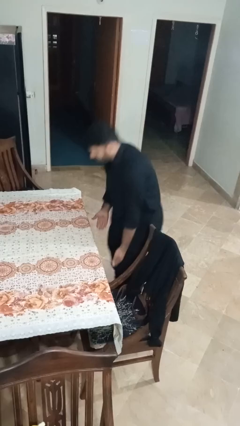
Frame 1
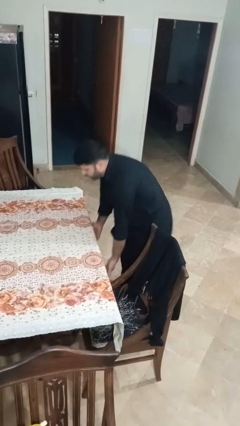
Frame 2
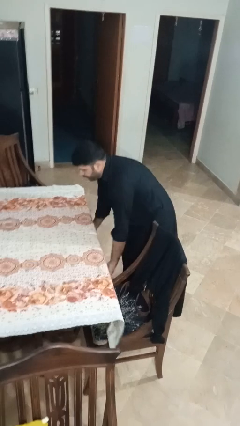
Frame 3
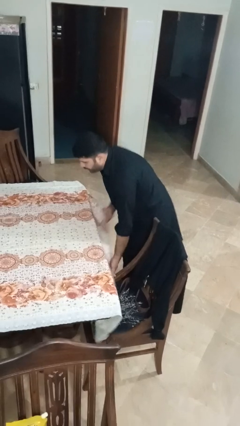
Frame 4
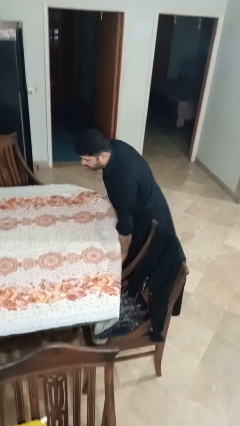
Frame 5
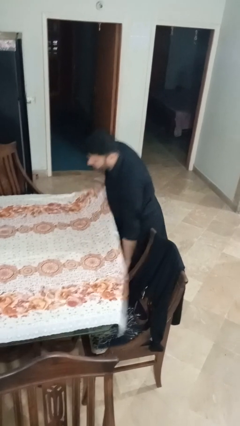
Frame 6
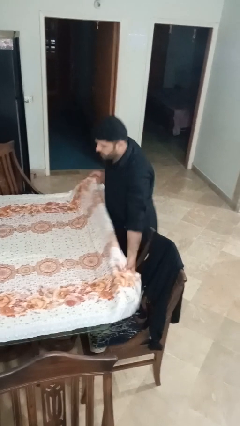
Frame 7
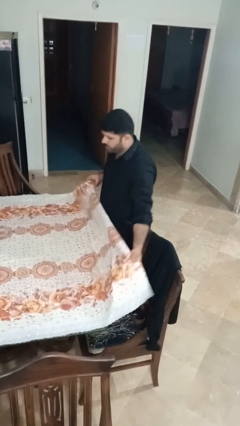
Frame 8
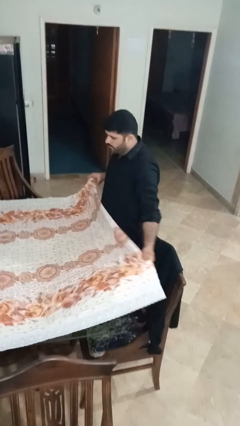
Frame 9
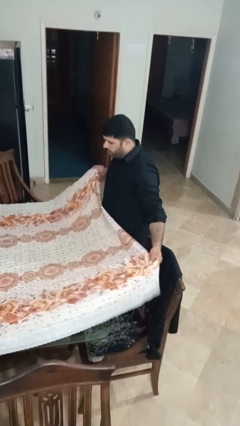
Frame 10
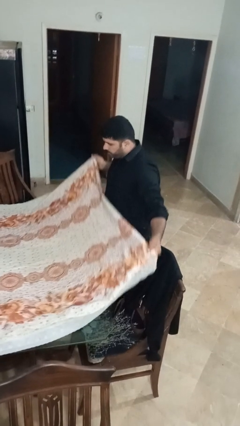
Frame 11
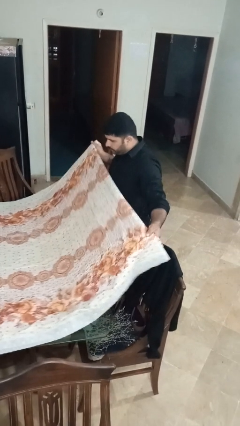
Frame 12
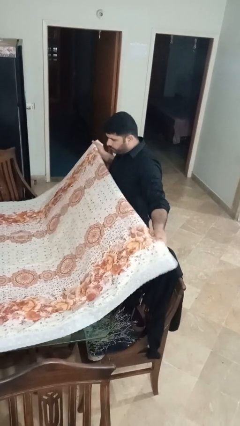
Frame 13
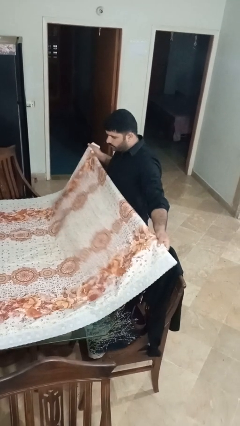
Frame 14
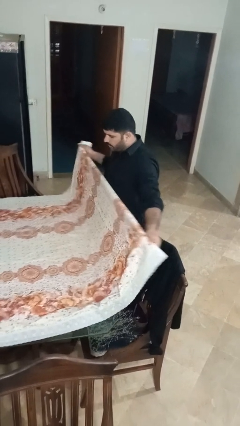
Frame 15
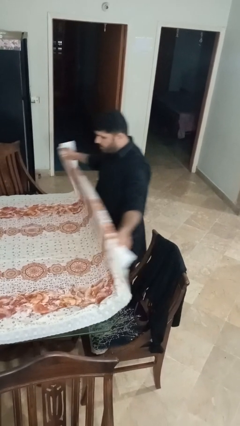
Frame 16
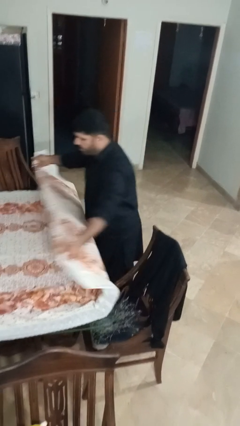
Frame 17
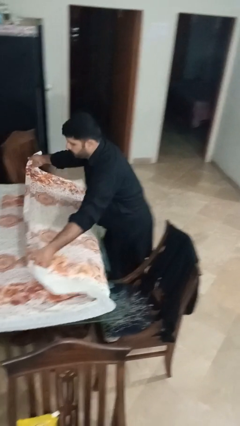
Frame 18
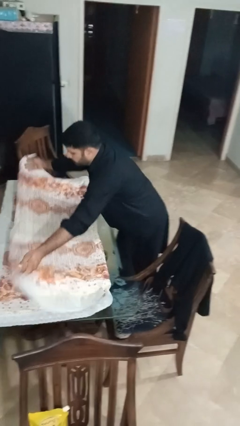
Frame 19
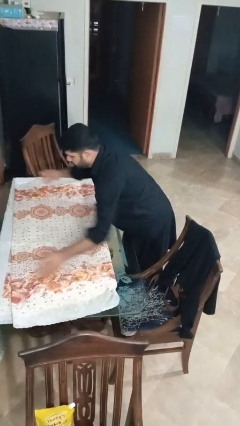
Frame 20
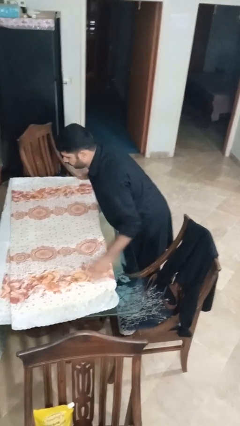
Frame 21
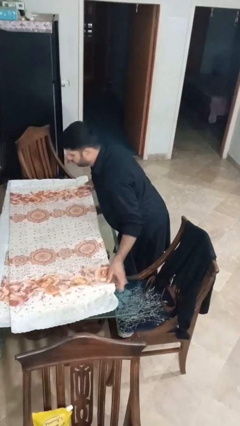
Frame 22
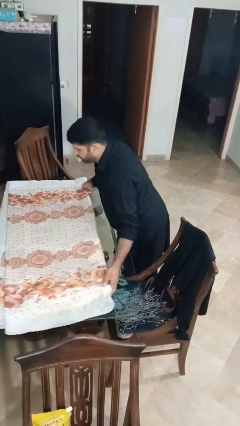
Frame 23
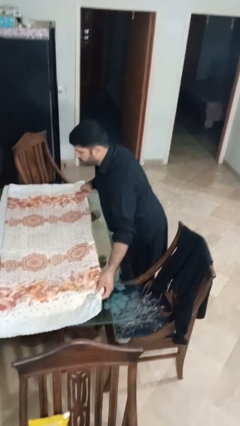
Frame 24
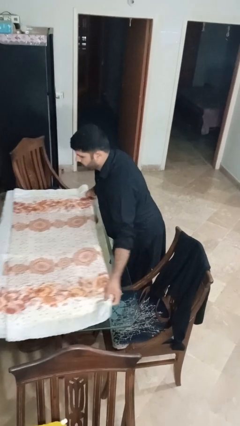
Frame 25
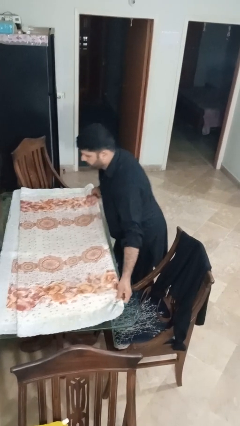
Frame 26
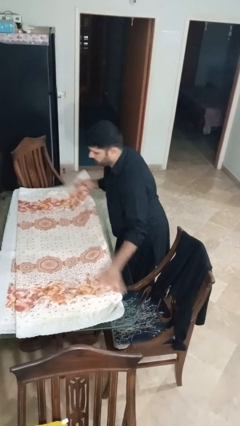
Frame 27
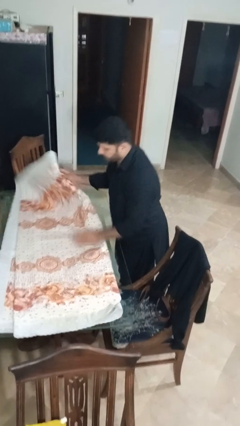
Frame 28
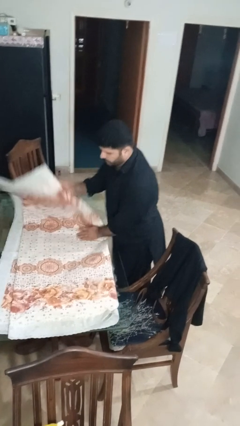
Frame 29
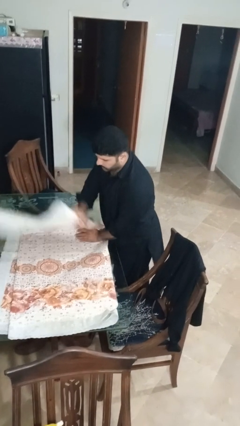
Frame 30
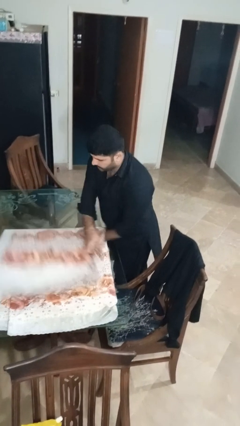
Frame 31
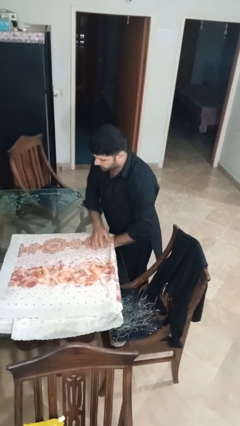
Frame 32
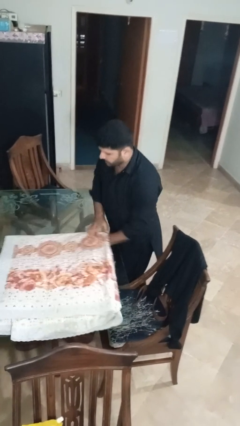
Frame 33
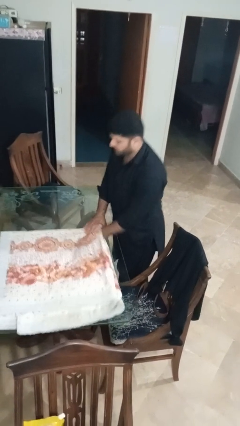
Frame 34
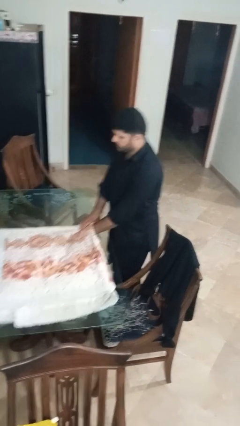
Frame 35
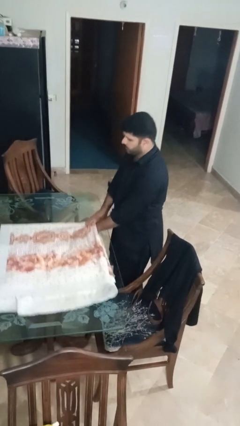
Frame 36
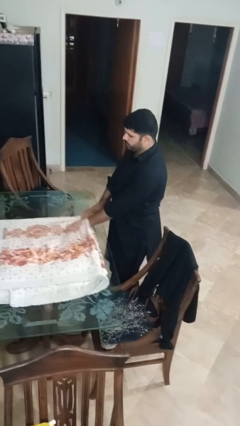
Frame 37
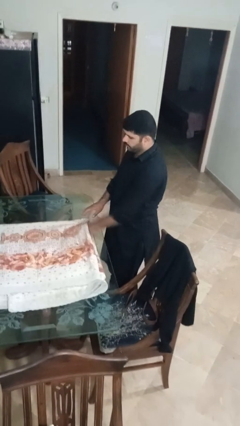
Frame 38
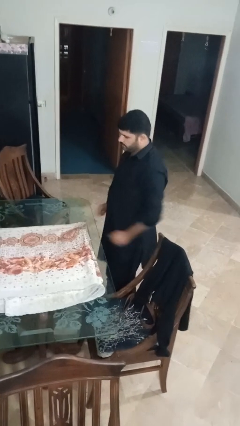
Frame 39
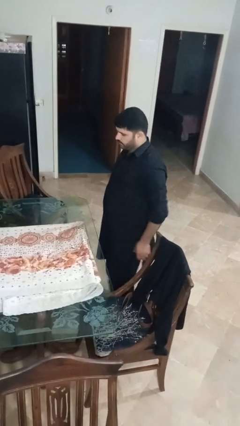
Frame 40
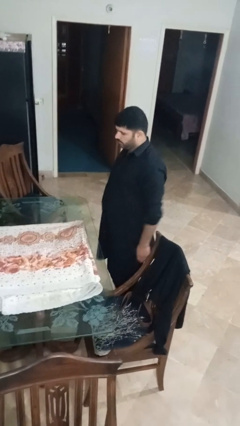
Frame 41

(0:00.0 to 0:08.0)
person folds tablecloth

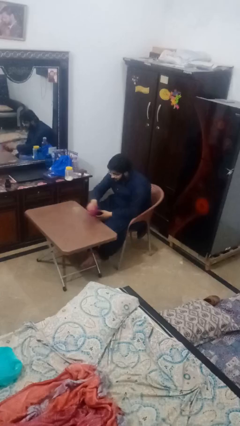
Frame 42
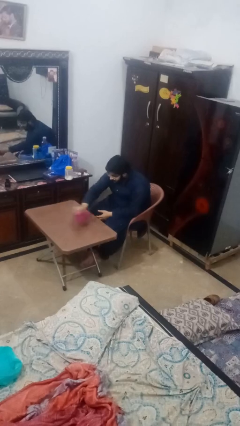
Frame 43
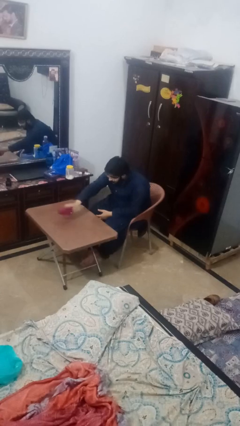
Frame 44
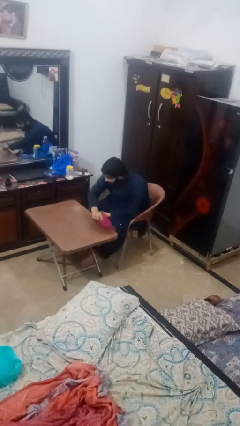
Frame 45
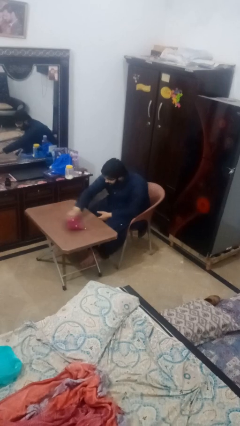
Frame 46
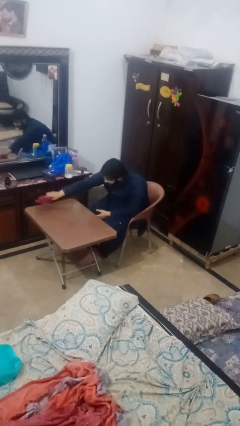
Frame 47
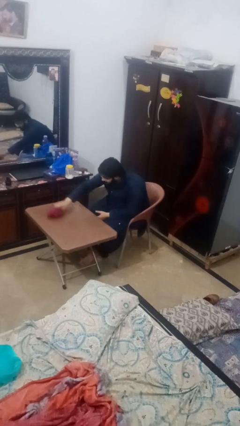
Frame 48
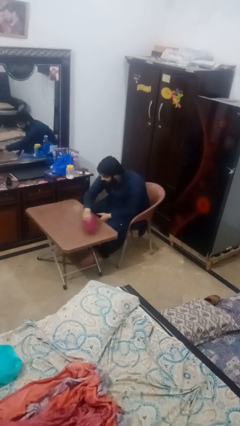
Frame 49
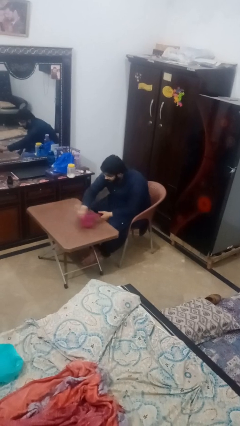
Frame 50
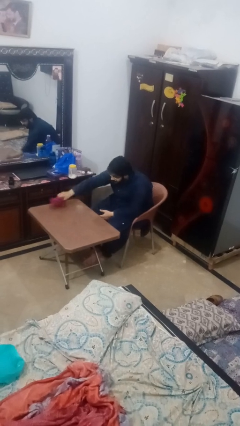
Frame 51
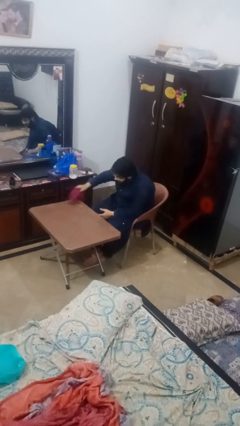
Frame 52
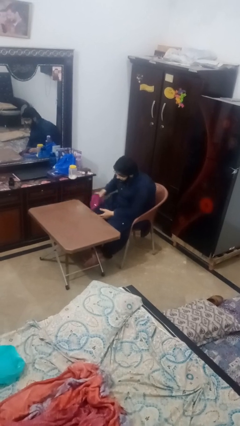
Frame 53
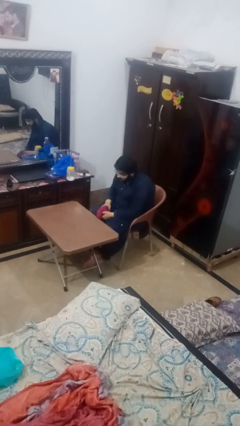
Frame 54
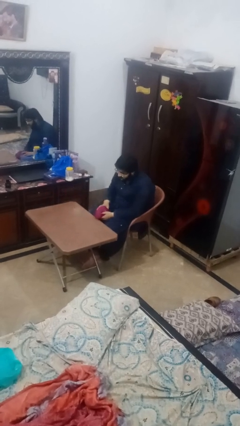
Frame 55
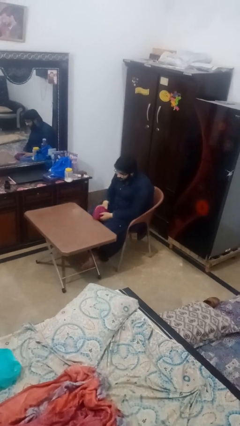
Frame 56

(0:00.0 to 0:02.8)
person cleans table with rag

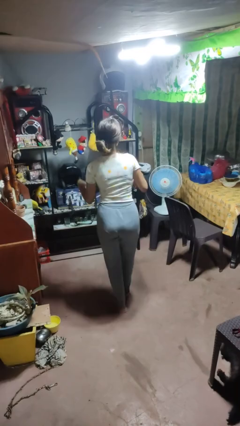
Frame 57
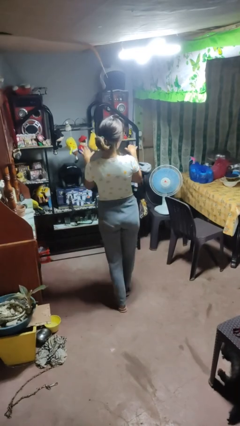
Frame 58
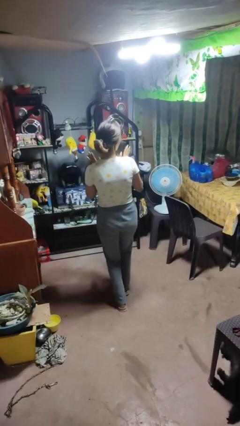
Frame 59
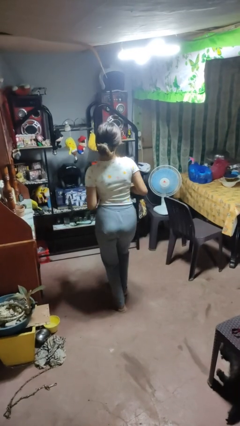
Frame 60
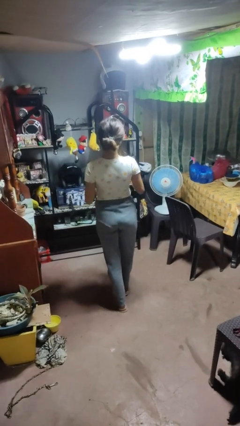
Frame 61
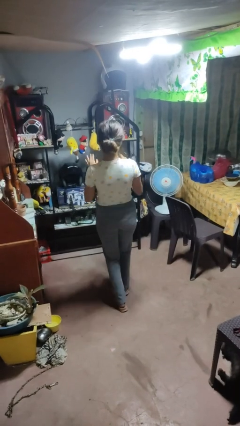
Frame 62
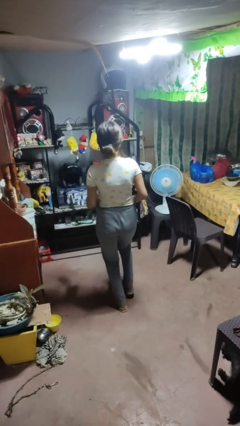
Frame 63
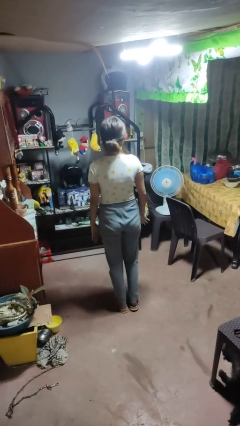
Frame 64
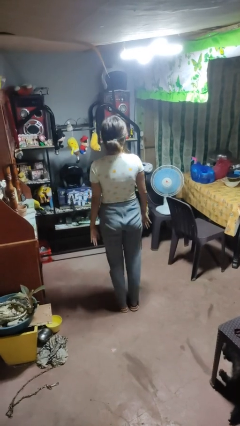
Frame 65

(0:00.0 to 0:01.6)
person dances in place

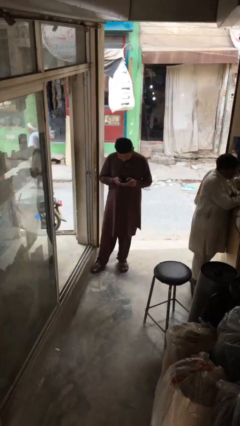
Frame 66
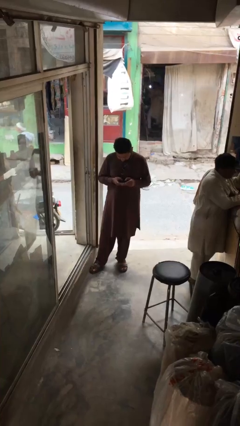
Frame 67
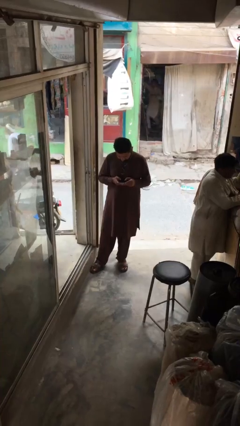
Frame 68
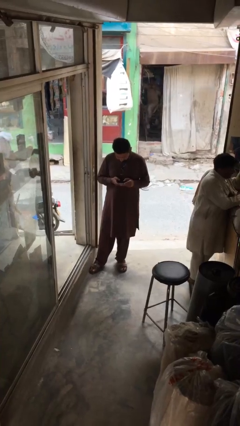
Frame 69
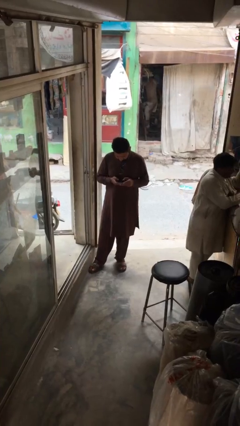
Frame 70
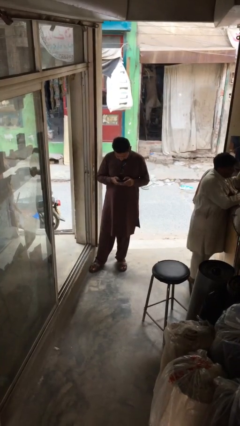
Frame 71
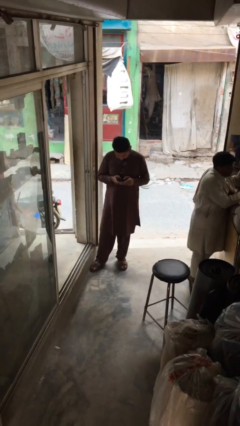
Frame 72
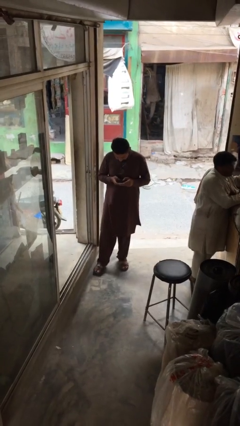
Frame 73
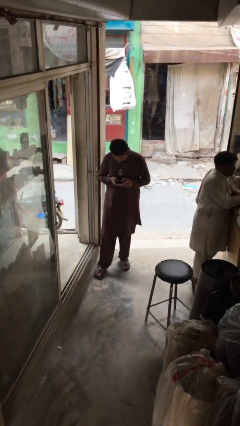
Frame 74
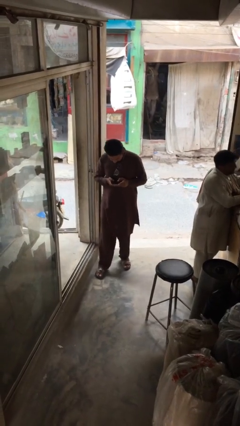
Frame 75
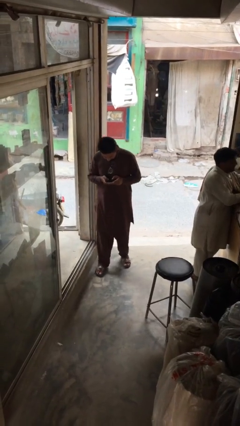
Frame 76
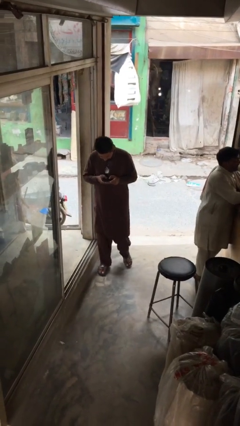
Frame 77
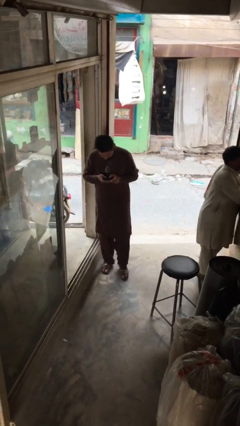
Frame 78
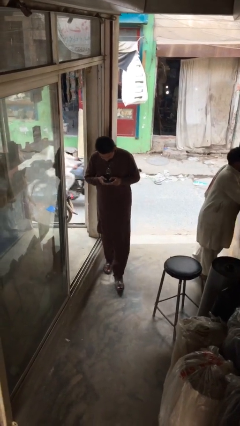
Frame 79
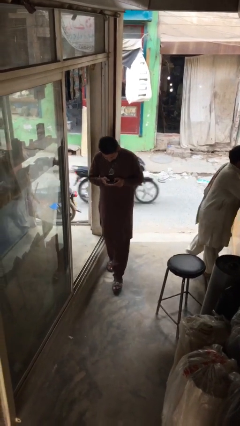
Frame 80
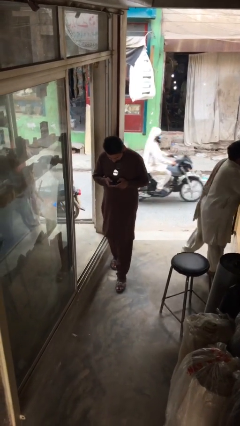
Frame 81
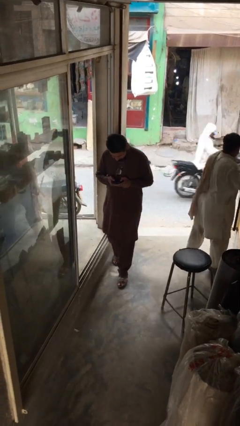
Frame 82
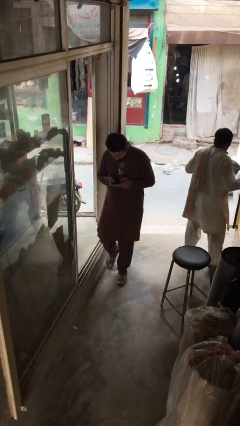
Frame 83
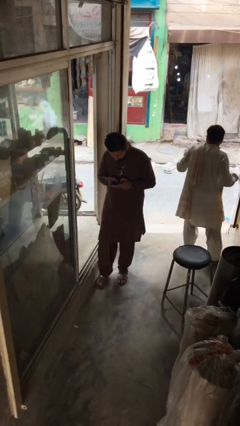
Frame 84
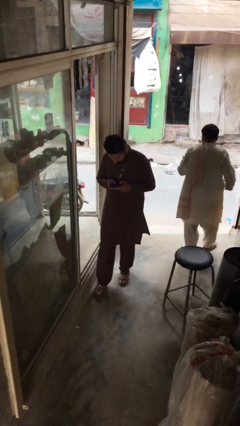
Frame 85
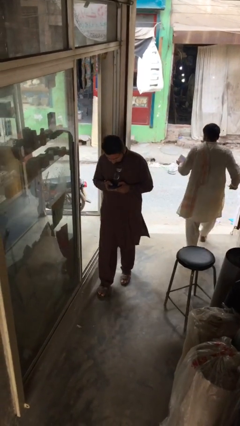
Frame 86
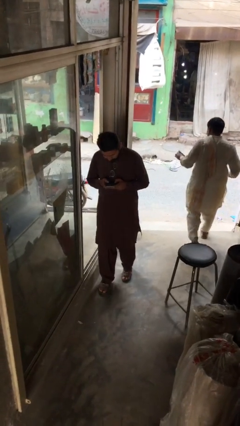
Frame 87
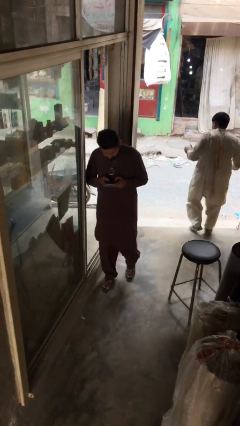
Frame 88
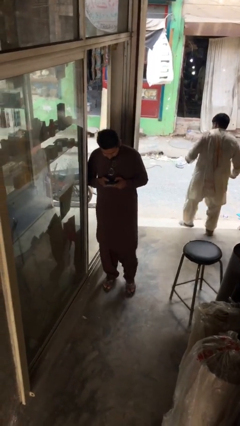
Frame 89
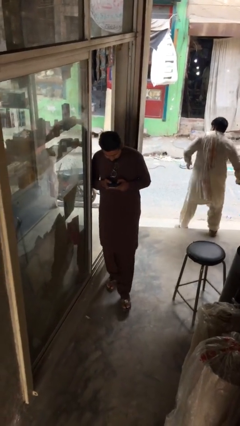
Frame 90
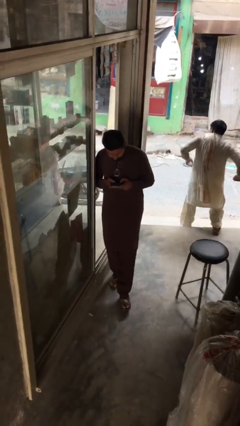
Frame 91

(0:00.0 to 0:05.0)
person texts on phone

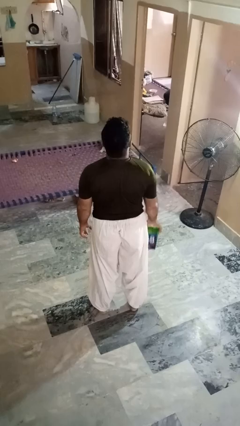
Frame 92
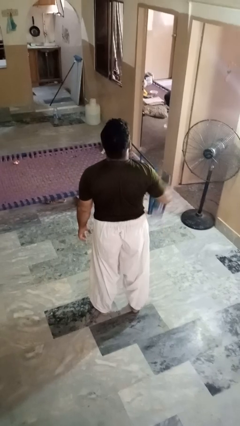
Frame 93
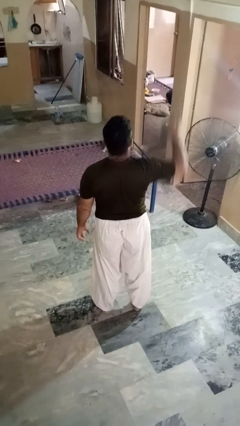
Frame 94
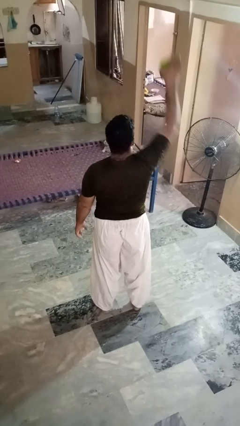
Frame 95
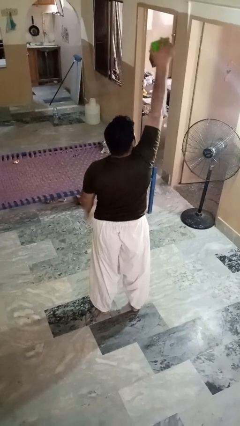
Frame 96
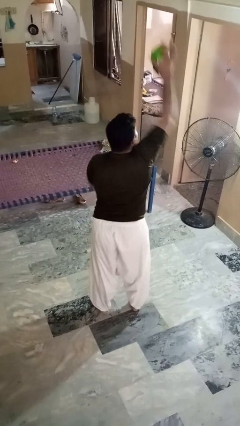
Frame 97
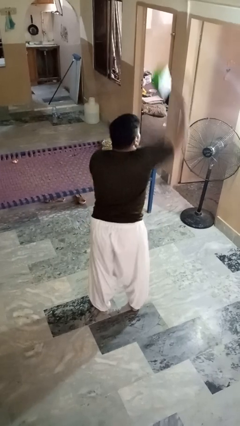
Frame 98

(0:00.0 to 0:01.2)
person drops object
